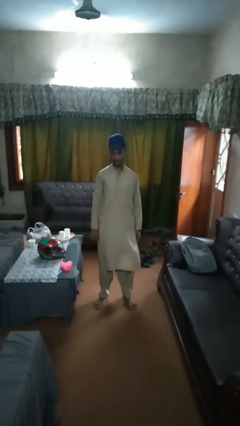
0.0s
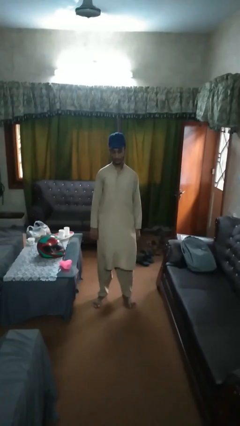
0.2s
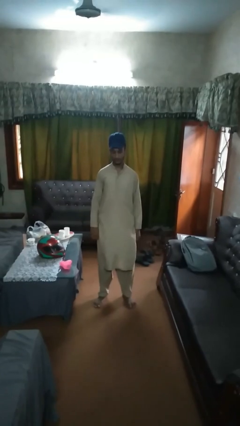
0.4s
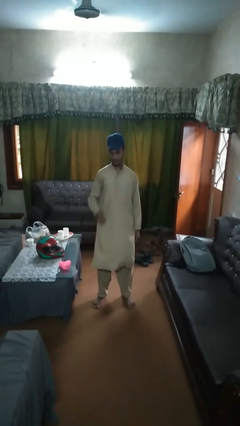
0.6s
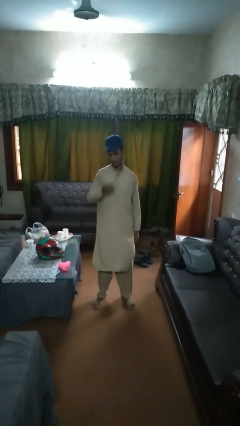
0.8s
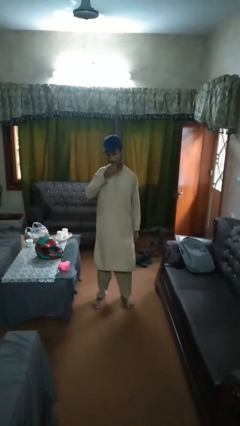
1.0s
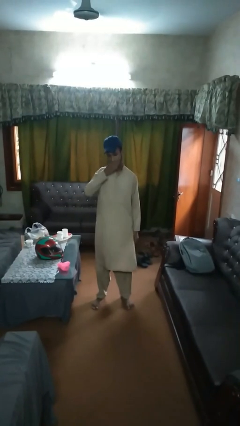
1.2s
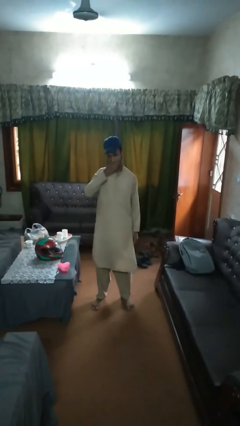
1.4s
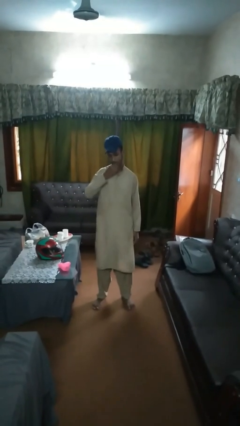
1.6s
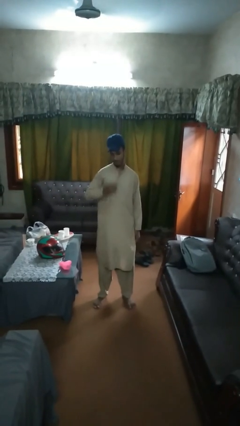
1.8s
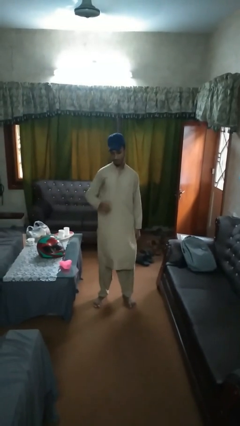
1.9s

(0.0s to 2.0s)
person eats banana

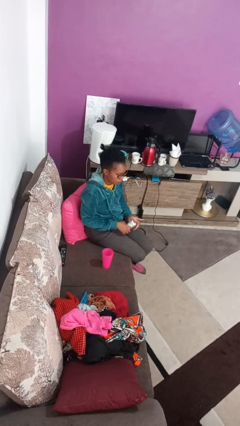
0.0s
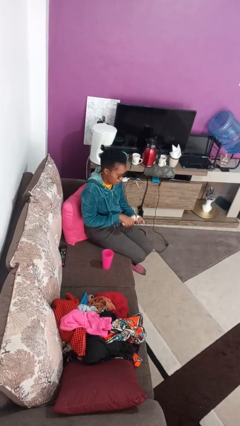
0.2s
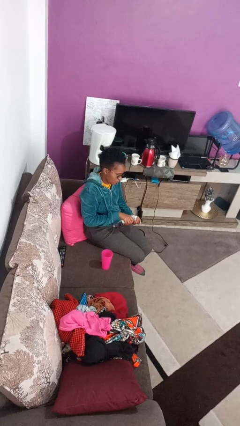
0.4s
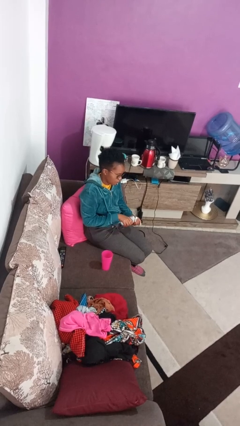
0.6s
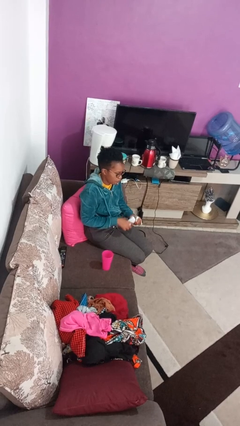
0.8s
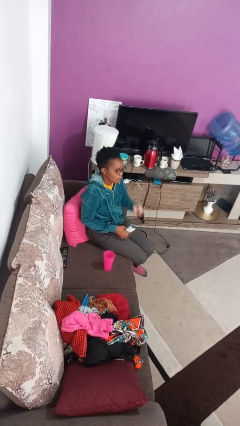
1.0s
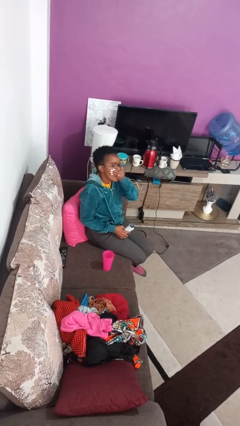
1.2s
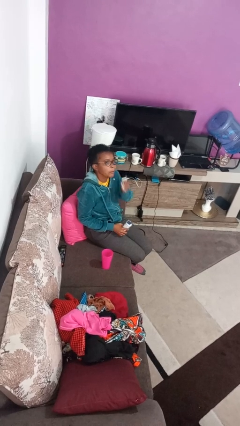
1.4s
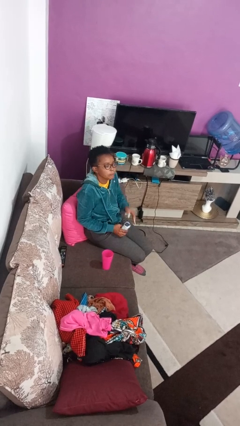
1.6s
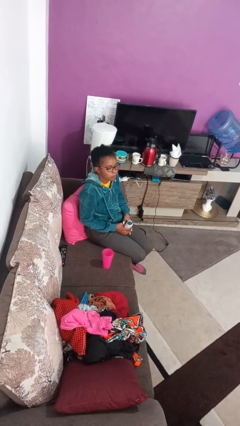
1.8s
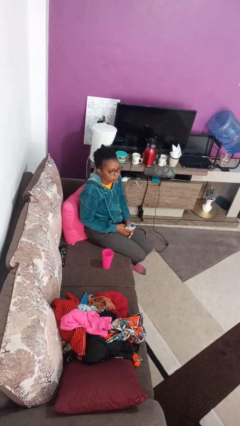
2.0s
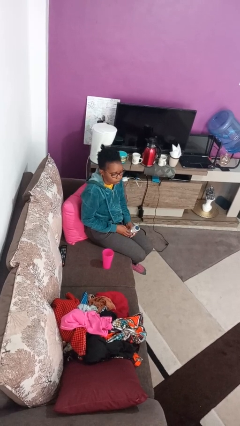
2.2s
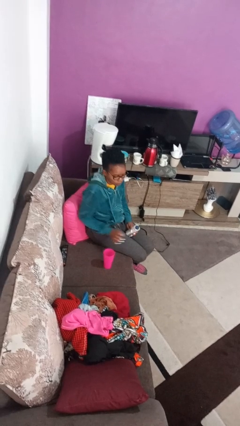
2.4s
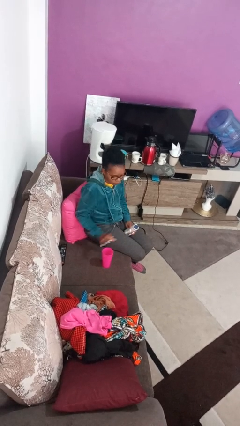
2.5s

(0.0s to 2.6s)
person takes medicine pills

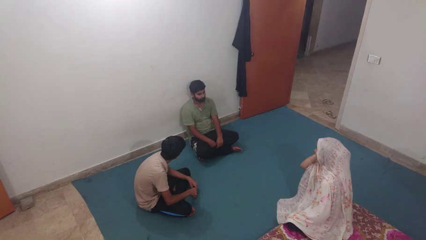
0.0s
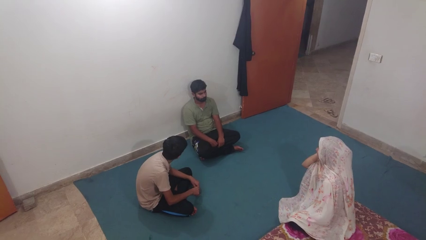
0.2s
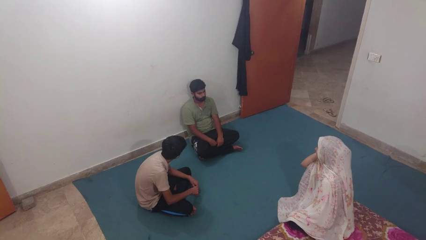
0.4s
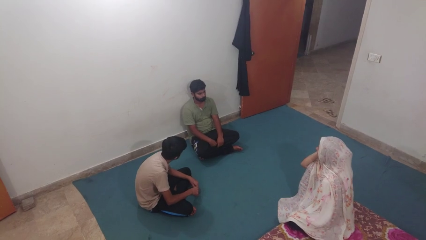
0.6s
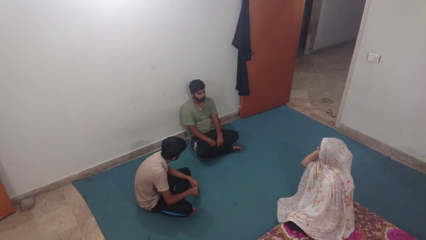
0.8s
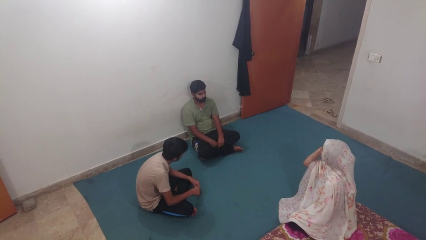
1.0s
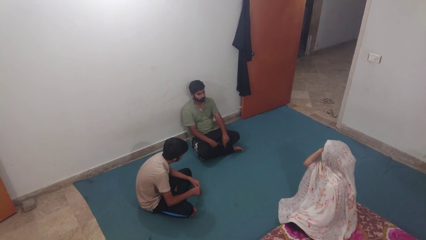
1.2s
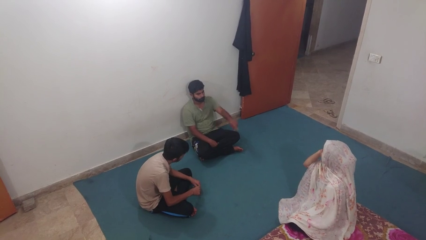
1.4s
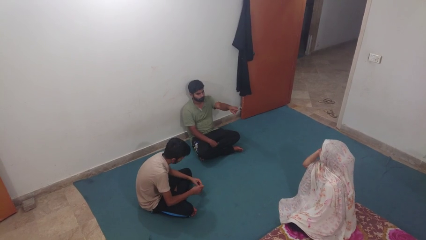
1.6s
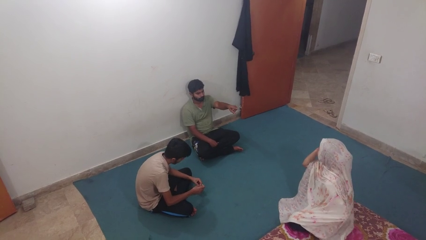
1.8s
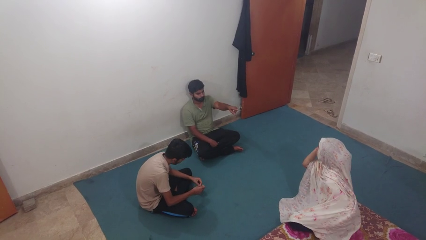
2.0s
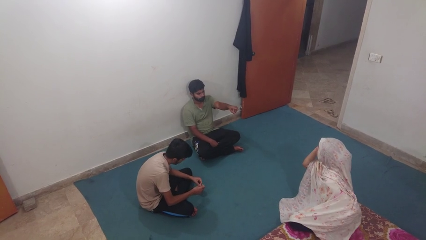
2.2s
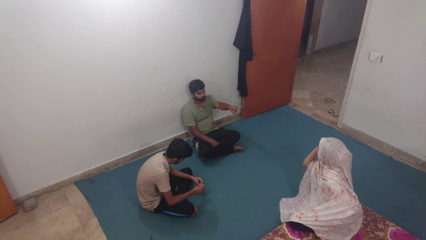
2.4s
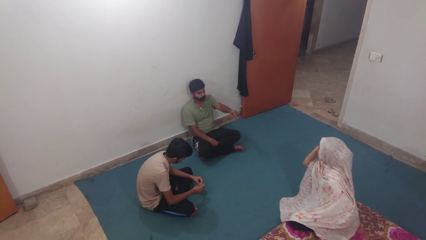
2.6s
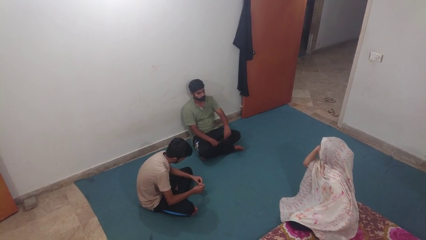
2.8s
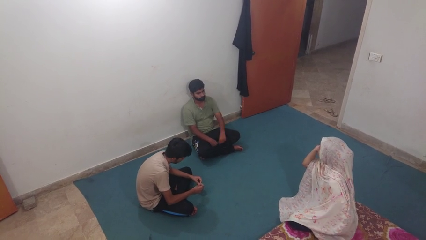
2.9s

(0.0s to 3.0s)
person points at person

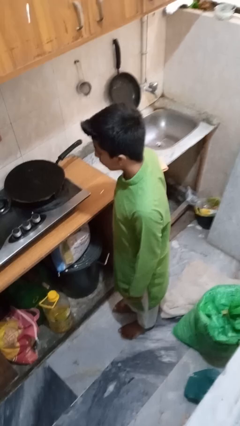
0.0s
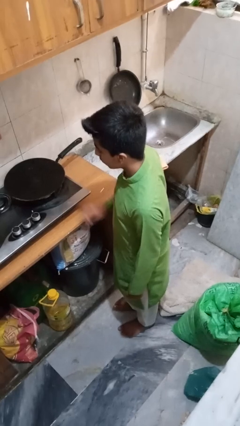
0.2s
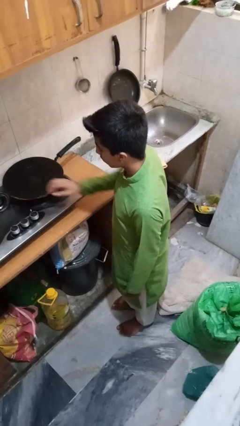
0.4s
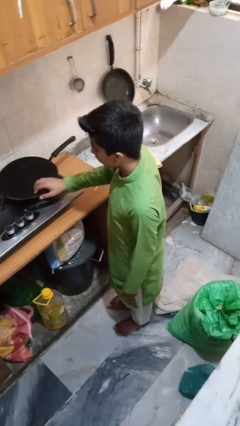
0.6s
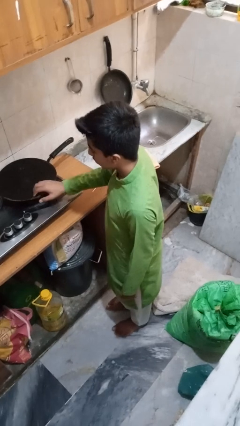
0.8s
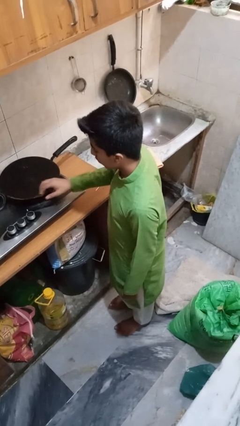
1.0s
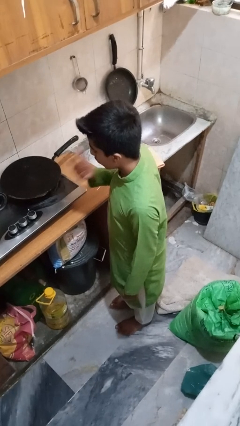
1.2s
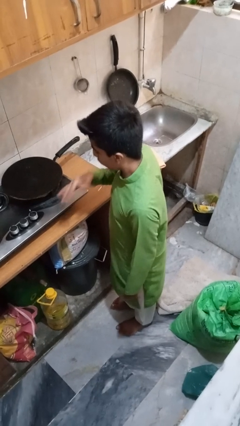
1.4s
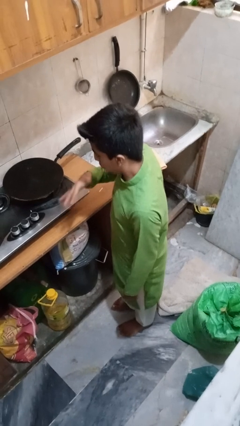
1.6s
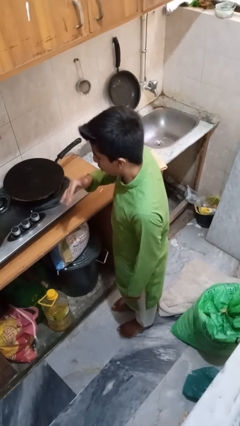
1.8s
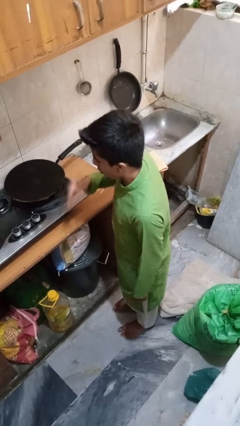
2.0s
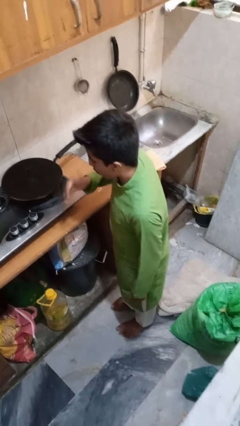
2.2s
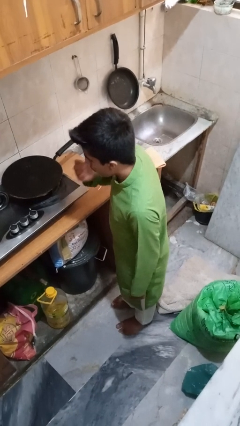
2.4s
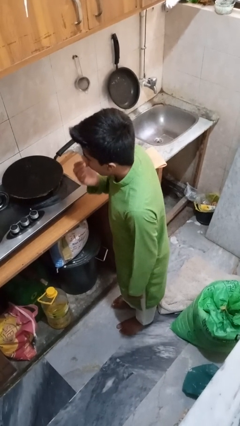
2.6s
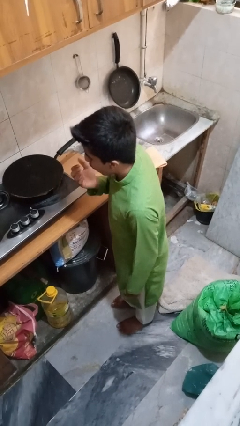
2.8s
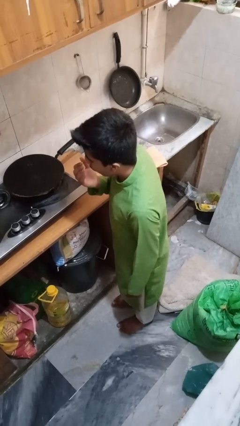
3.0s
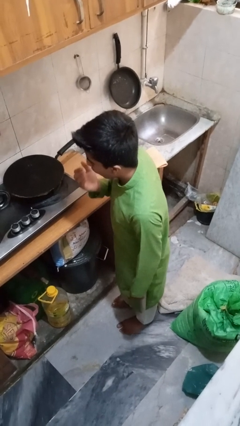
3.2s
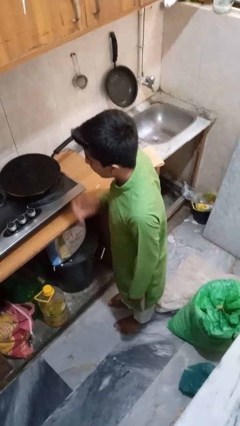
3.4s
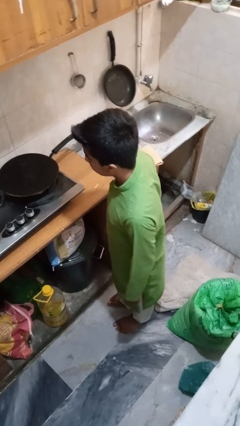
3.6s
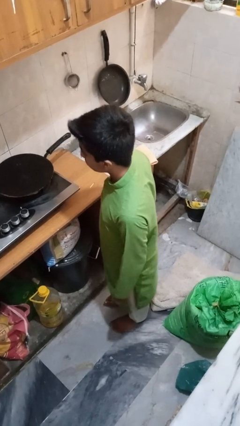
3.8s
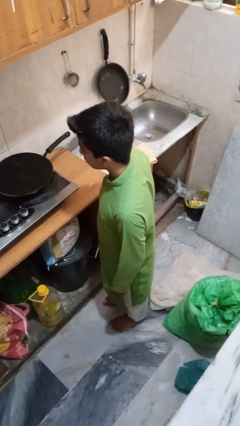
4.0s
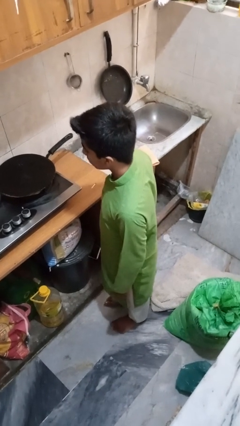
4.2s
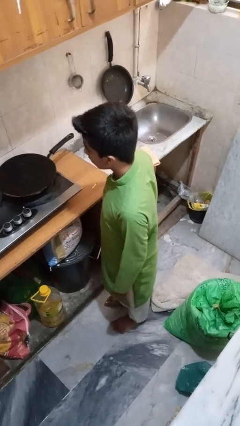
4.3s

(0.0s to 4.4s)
person burns hand

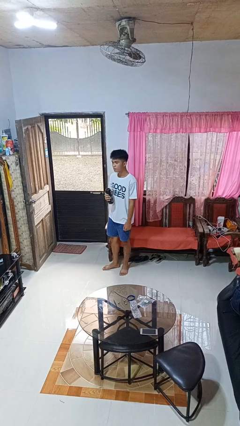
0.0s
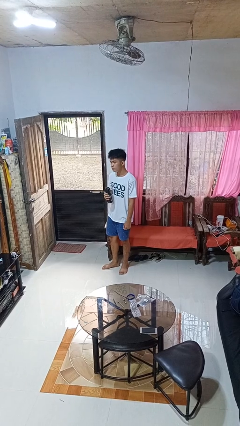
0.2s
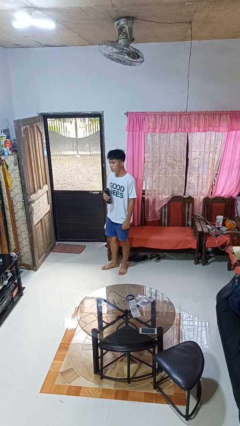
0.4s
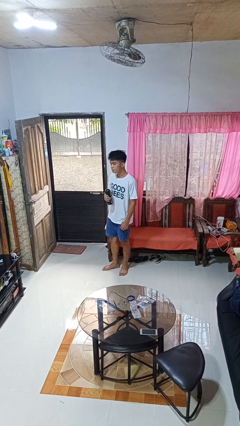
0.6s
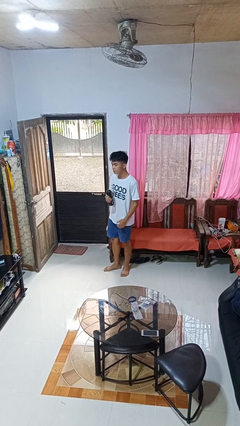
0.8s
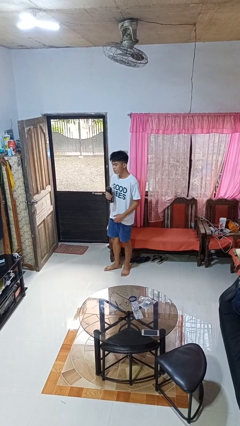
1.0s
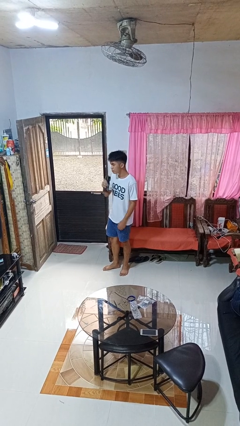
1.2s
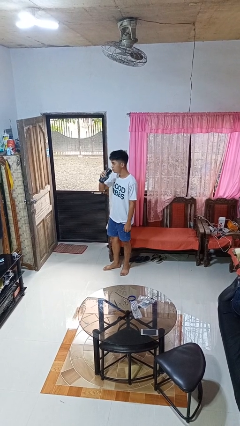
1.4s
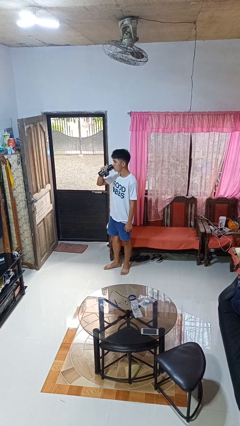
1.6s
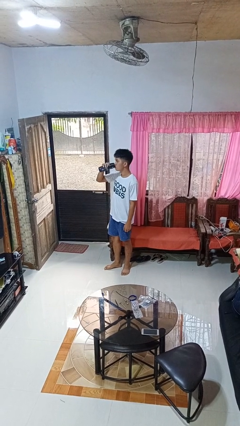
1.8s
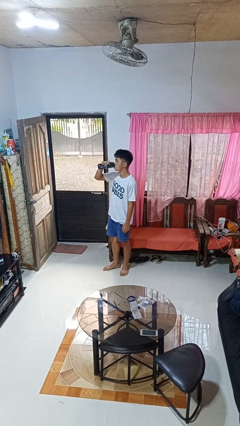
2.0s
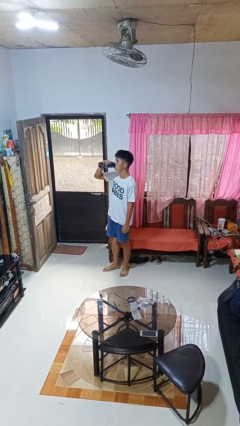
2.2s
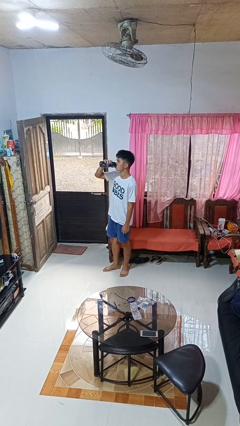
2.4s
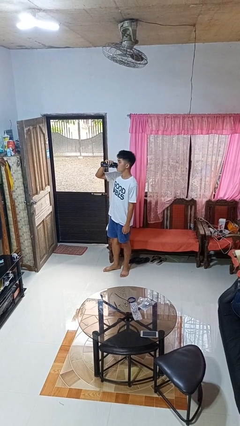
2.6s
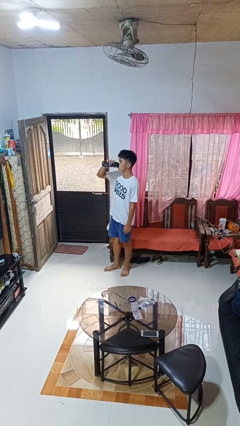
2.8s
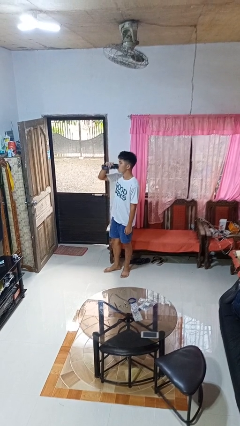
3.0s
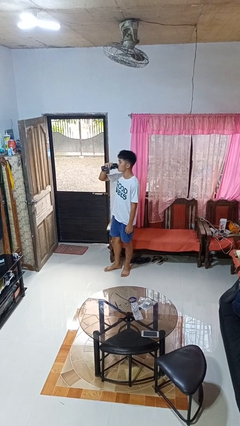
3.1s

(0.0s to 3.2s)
person drinks from bottle

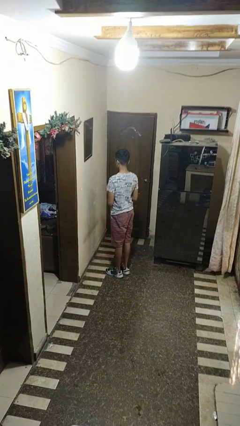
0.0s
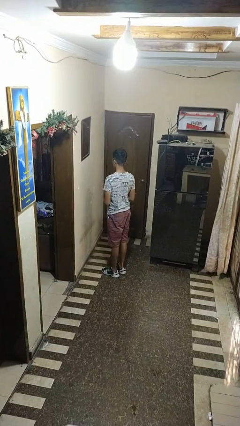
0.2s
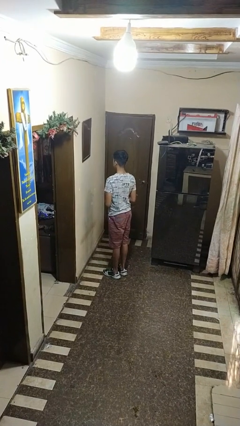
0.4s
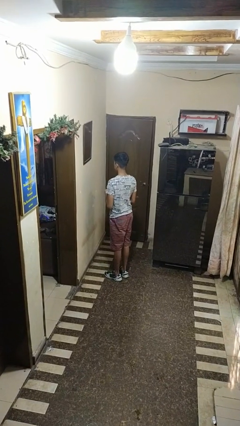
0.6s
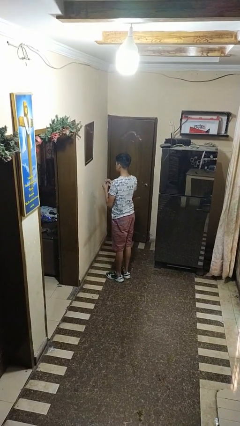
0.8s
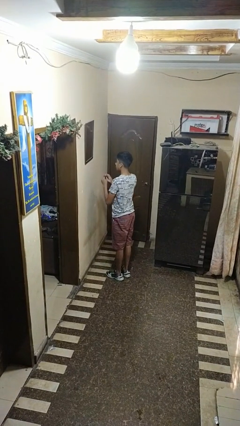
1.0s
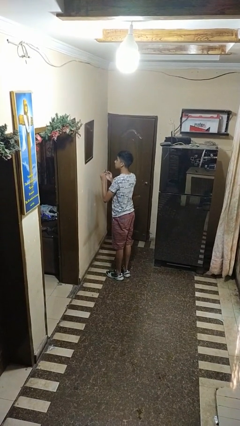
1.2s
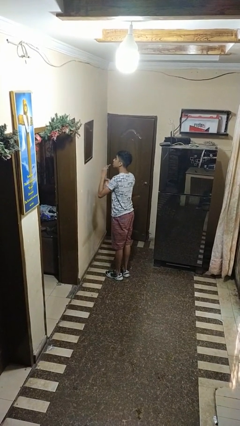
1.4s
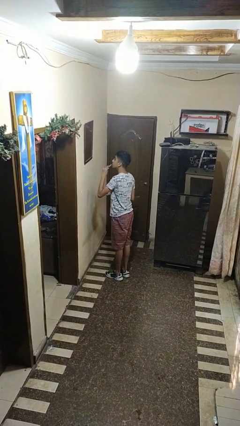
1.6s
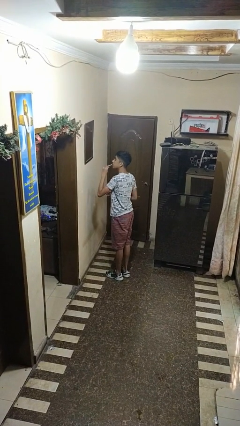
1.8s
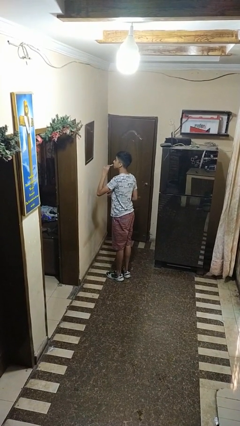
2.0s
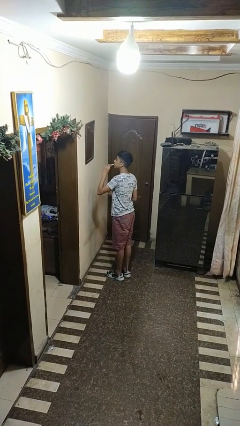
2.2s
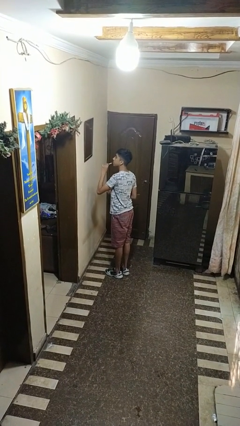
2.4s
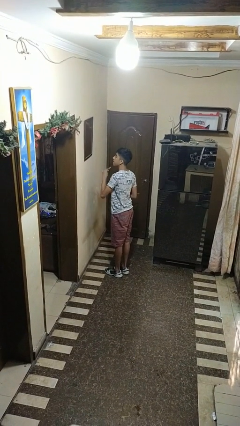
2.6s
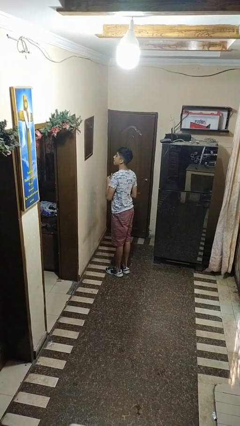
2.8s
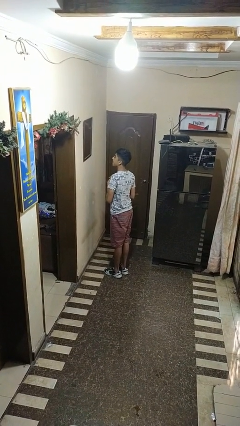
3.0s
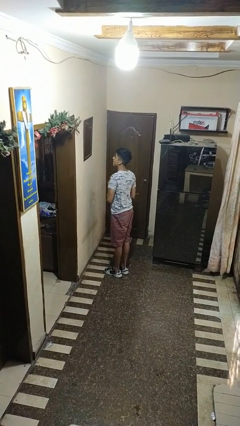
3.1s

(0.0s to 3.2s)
person applies lip makeup
